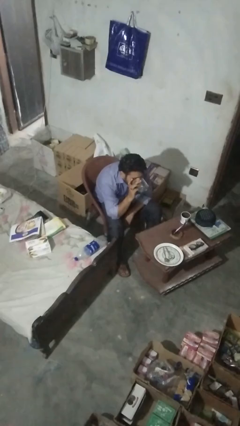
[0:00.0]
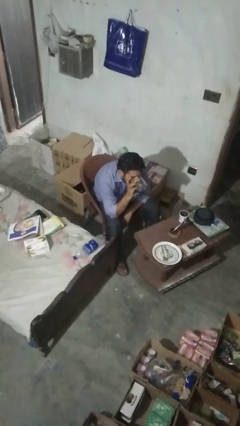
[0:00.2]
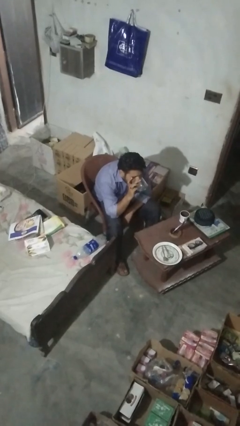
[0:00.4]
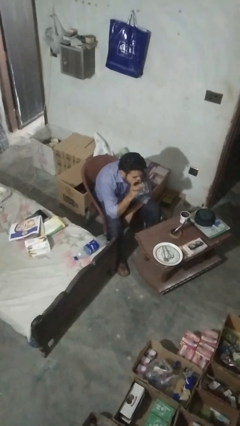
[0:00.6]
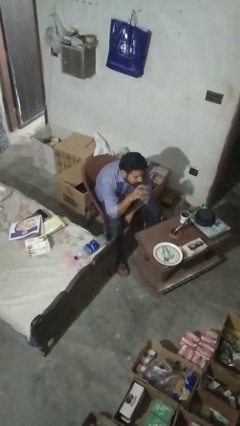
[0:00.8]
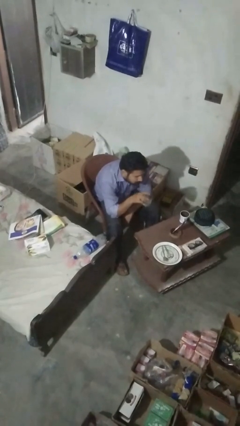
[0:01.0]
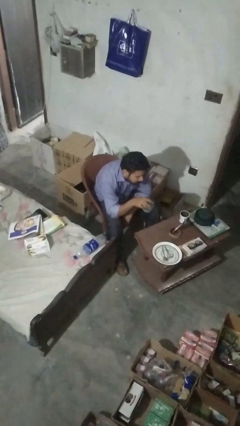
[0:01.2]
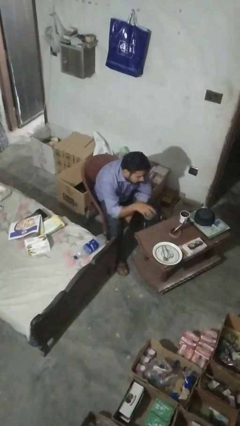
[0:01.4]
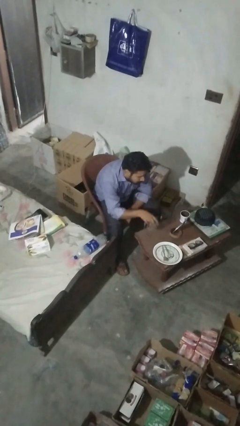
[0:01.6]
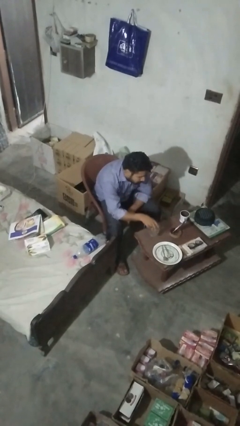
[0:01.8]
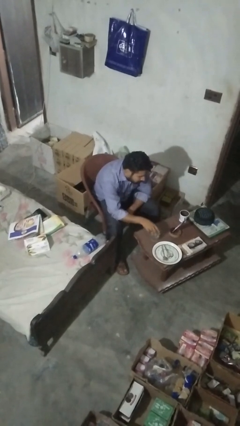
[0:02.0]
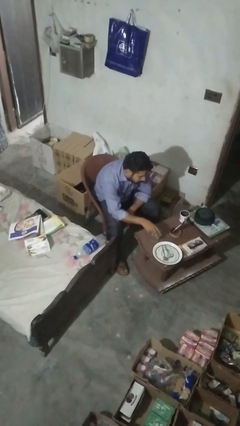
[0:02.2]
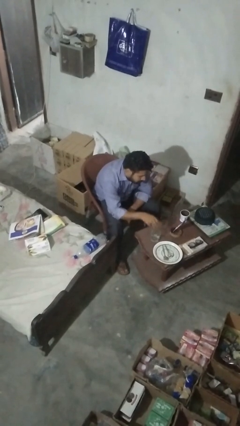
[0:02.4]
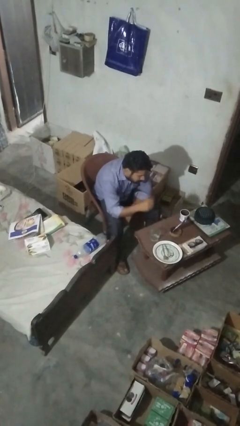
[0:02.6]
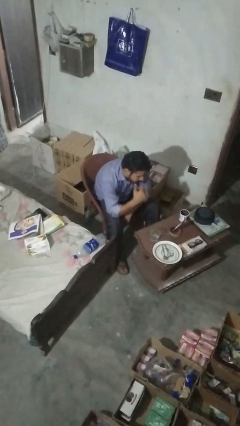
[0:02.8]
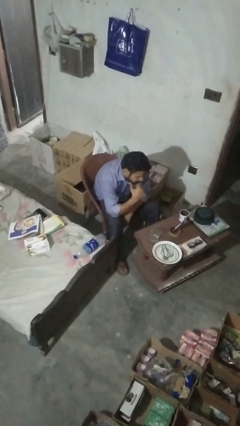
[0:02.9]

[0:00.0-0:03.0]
person puts down object on table

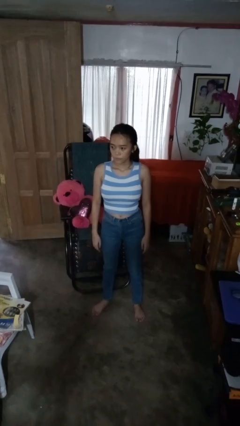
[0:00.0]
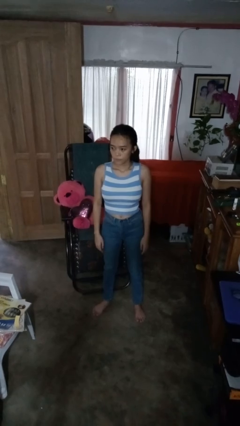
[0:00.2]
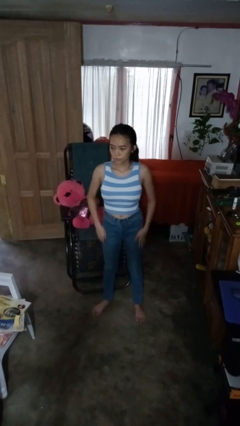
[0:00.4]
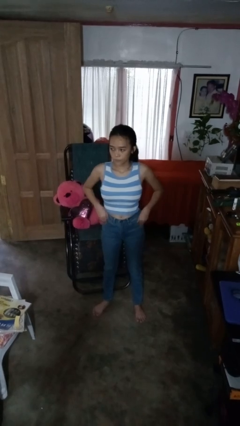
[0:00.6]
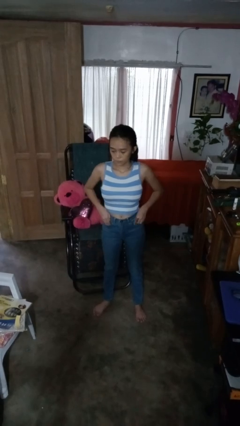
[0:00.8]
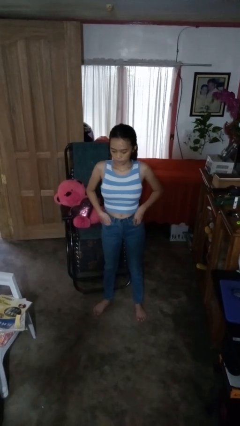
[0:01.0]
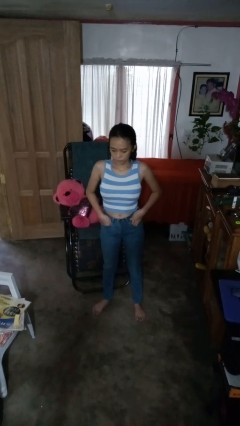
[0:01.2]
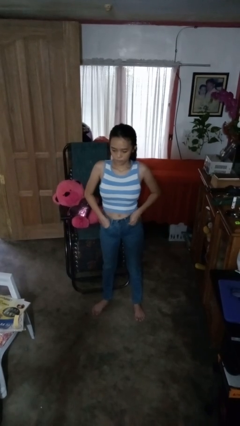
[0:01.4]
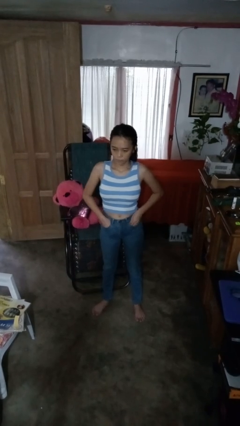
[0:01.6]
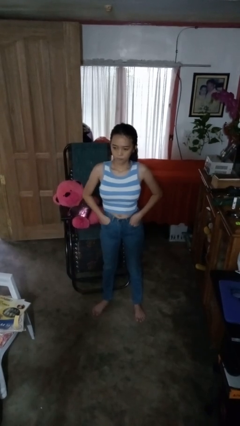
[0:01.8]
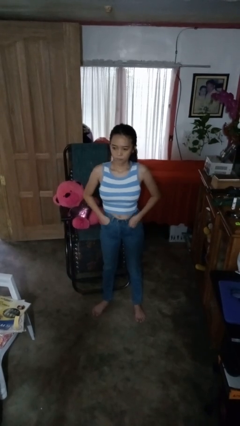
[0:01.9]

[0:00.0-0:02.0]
person puts hands in back pockets

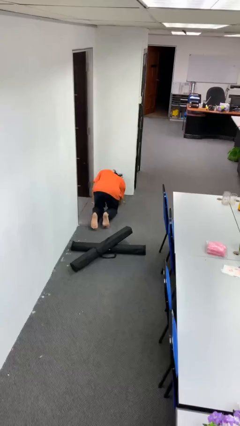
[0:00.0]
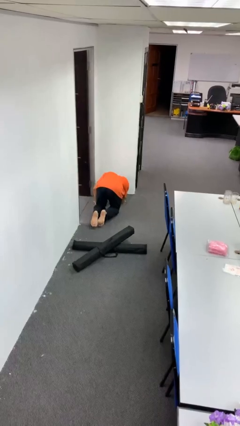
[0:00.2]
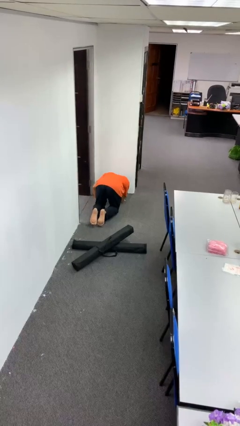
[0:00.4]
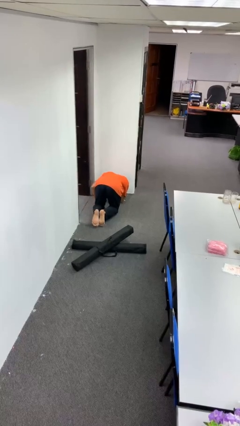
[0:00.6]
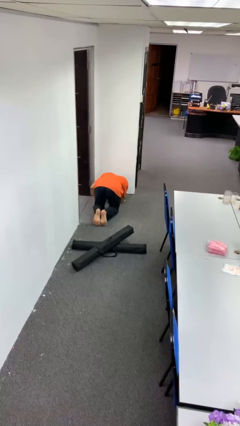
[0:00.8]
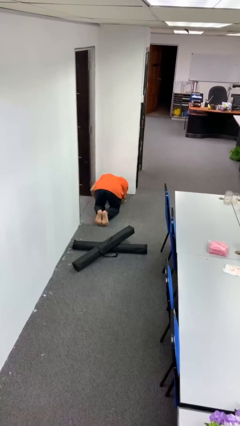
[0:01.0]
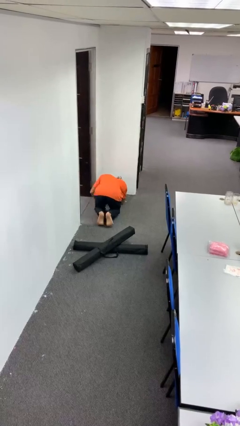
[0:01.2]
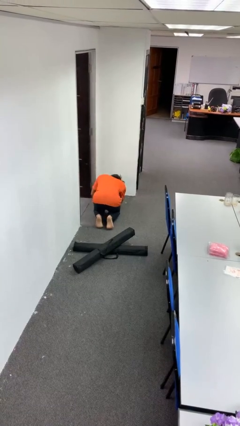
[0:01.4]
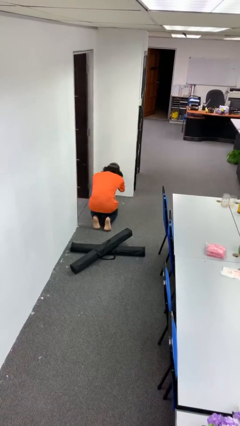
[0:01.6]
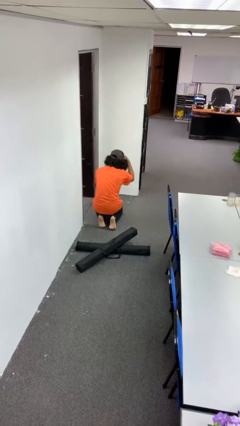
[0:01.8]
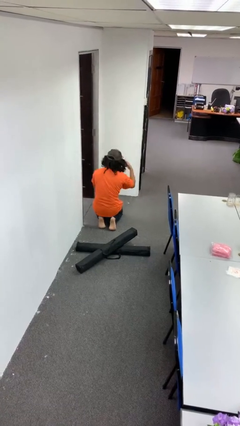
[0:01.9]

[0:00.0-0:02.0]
person lies down on floor

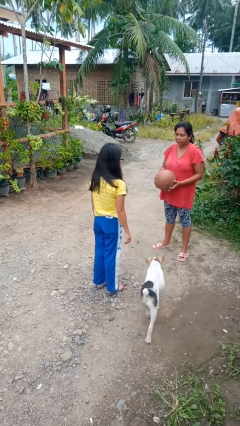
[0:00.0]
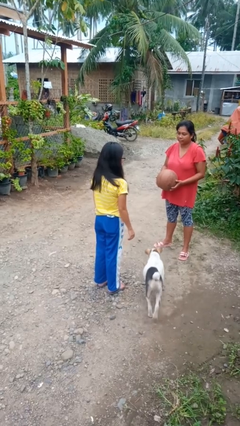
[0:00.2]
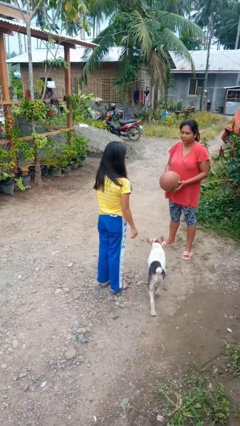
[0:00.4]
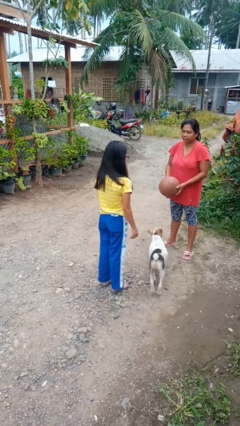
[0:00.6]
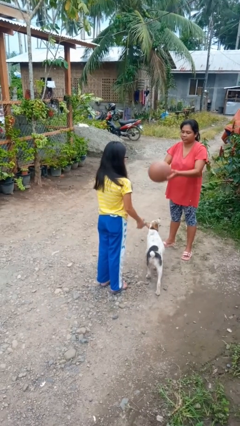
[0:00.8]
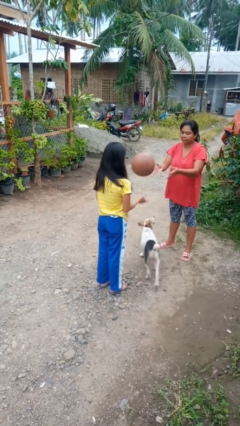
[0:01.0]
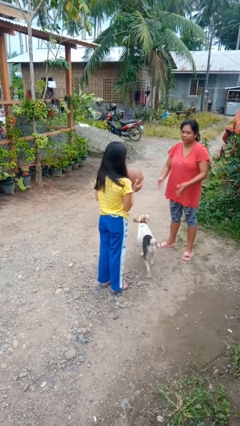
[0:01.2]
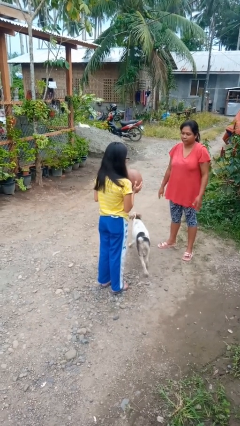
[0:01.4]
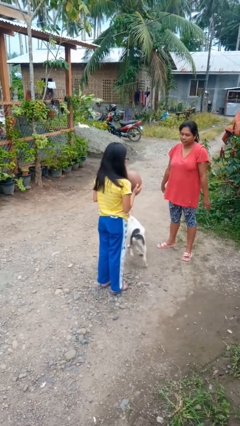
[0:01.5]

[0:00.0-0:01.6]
person catches object from person

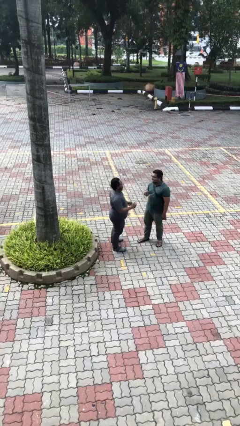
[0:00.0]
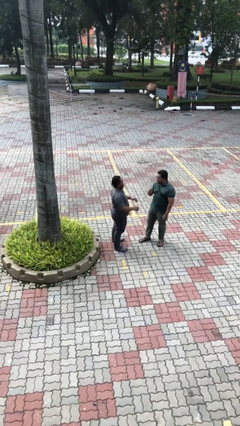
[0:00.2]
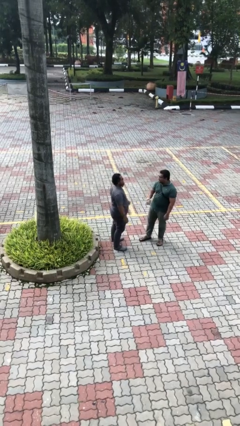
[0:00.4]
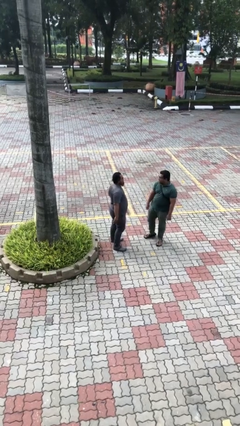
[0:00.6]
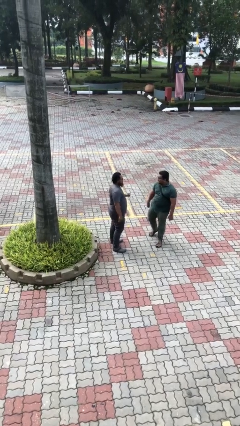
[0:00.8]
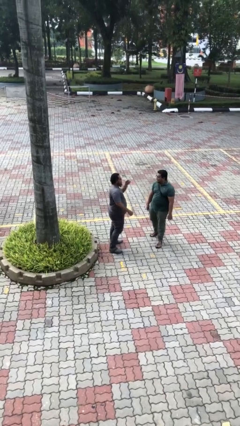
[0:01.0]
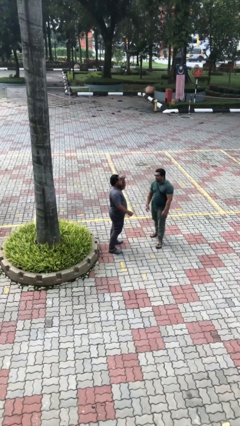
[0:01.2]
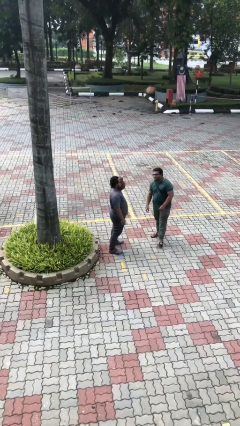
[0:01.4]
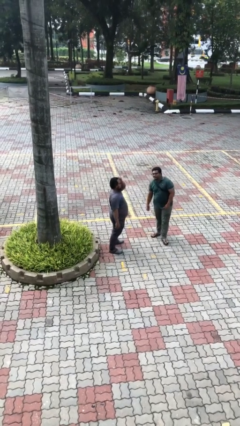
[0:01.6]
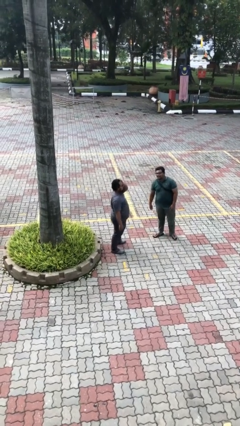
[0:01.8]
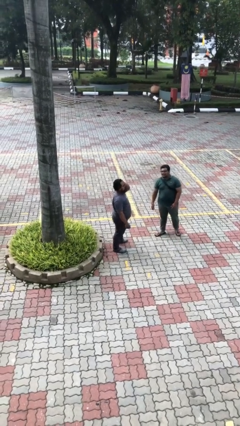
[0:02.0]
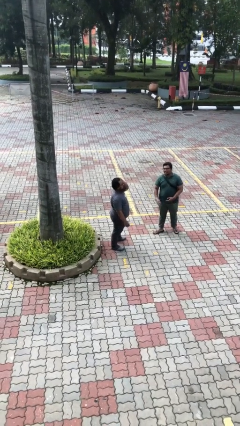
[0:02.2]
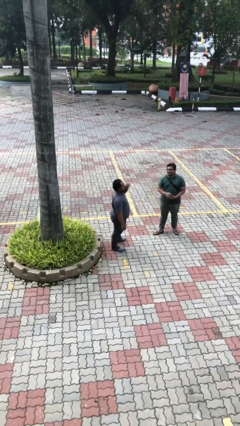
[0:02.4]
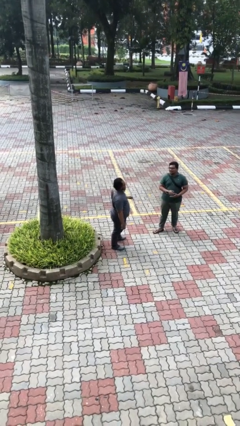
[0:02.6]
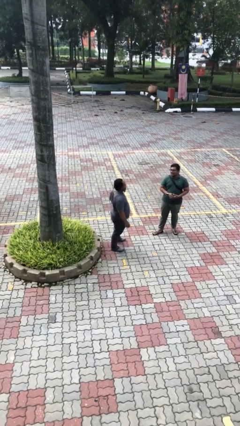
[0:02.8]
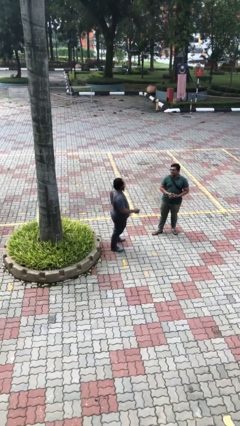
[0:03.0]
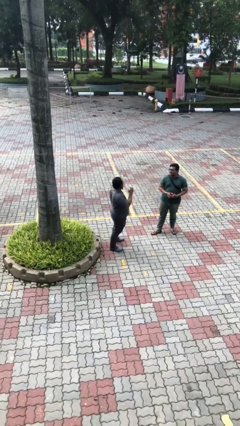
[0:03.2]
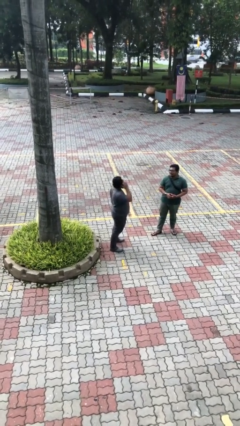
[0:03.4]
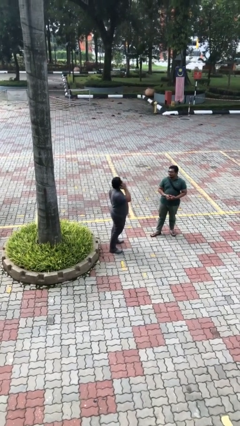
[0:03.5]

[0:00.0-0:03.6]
person talks to person

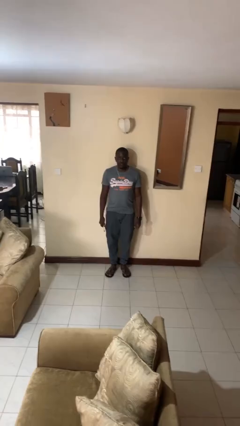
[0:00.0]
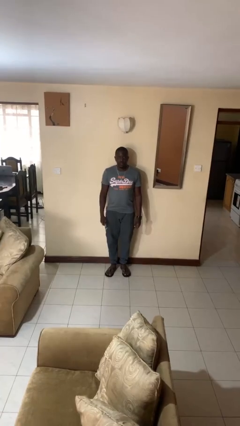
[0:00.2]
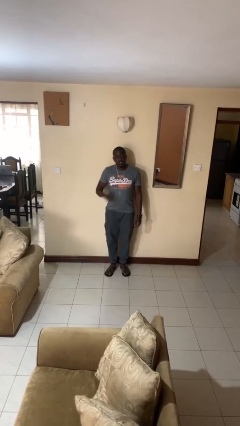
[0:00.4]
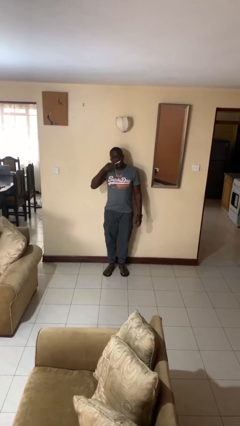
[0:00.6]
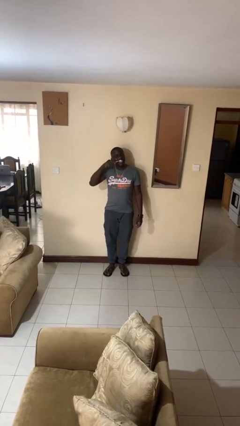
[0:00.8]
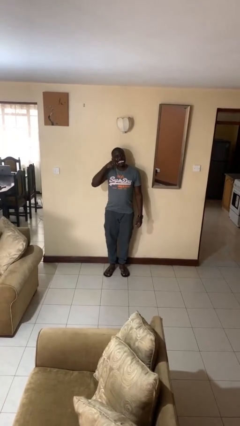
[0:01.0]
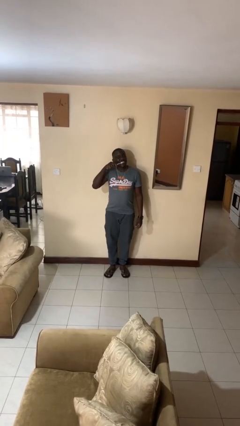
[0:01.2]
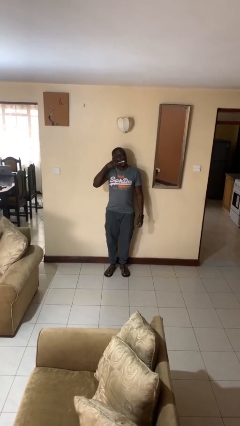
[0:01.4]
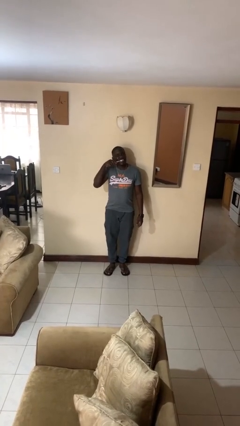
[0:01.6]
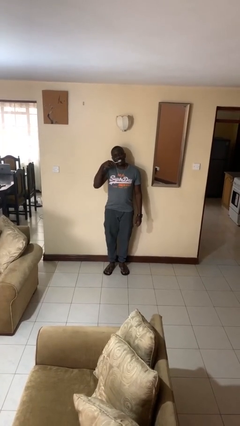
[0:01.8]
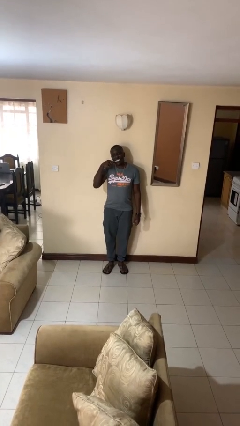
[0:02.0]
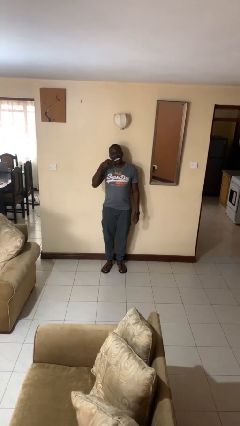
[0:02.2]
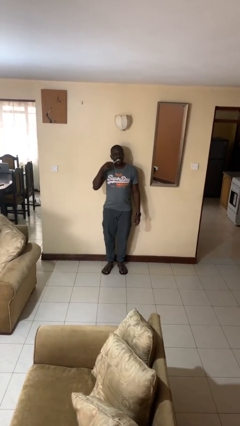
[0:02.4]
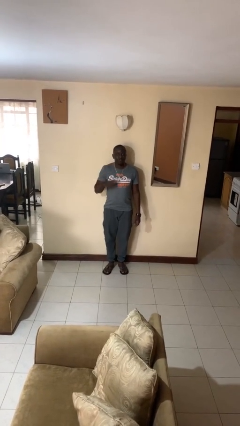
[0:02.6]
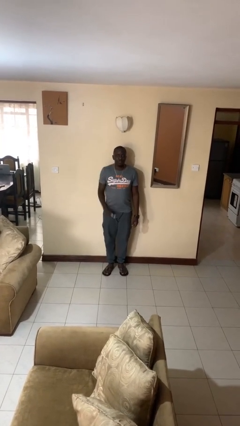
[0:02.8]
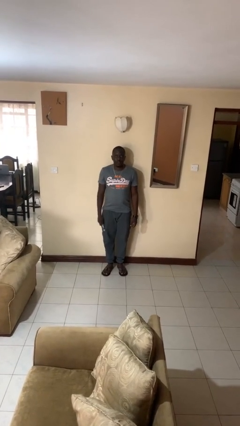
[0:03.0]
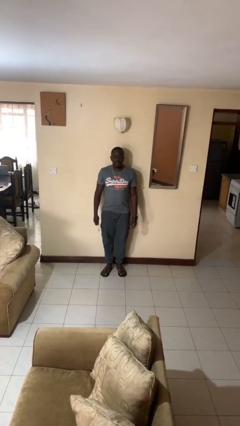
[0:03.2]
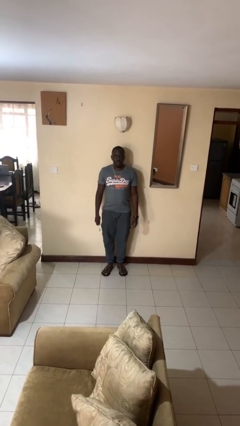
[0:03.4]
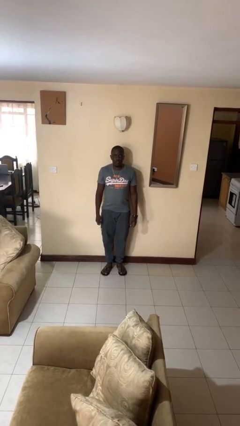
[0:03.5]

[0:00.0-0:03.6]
person brushes teeth

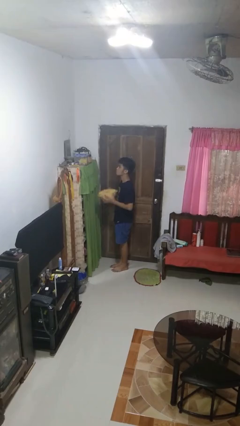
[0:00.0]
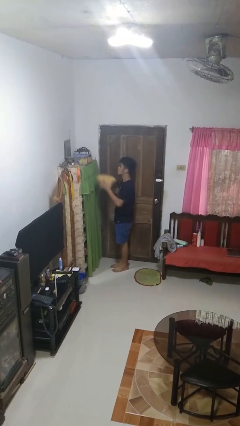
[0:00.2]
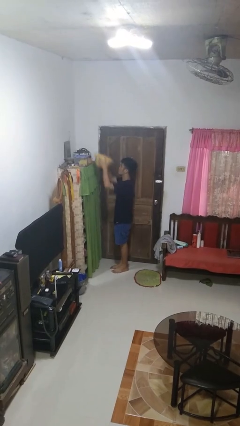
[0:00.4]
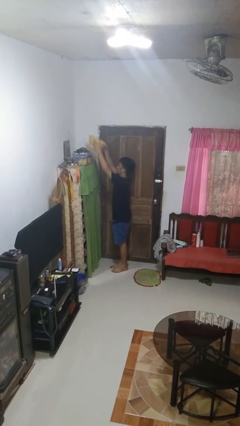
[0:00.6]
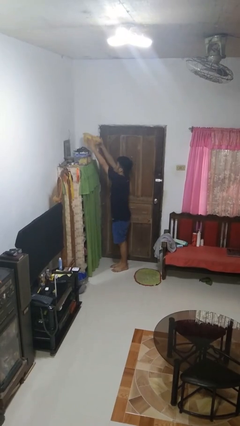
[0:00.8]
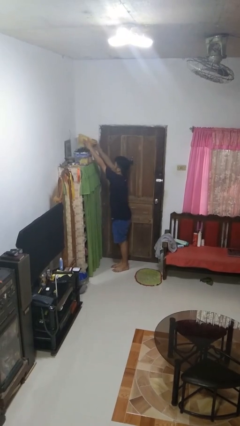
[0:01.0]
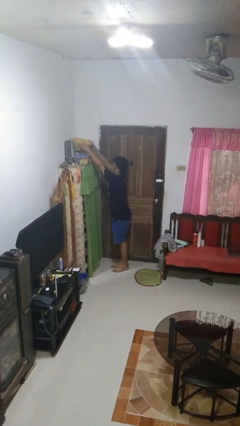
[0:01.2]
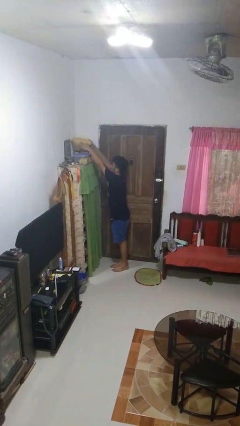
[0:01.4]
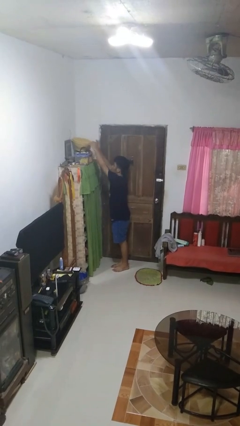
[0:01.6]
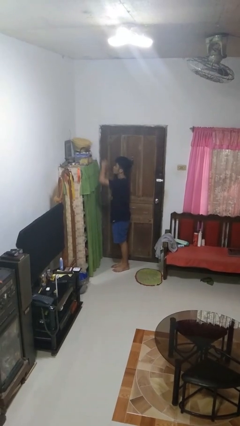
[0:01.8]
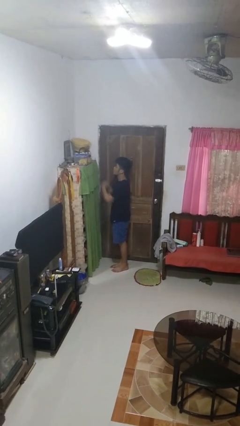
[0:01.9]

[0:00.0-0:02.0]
person puts down object on shelf
